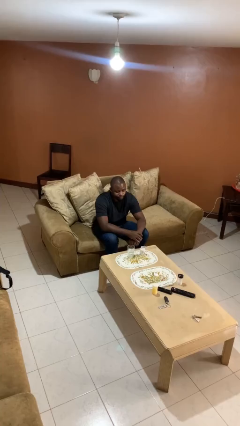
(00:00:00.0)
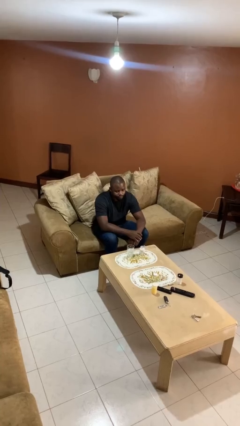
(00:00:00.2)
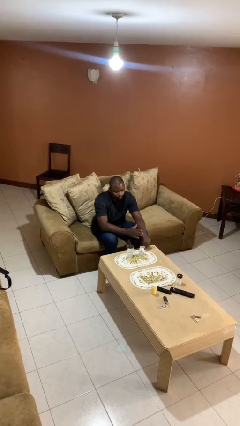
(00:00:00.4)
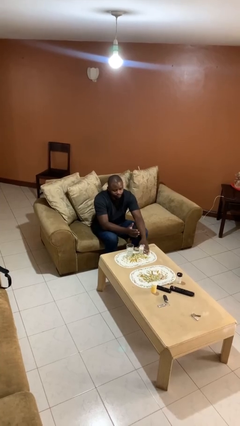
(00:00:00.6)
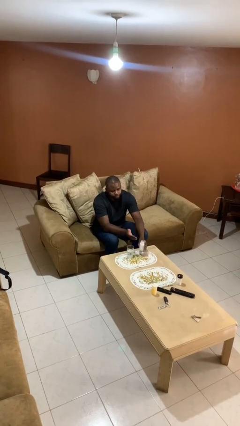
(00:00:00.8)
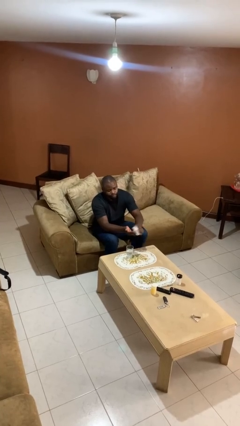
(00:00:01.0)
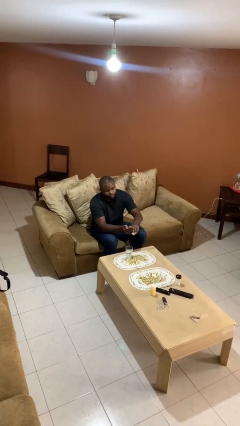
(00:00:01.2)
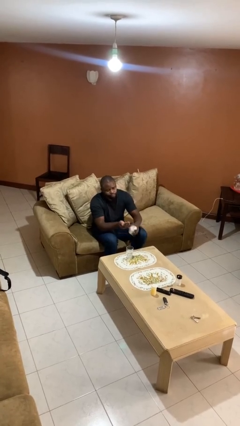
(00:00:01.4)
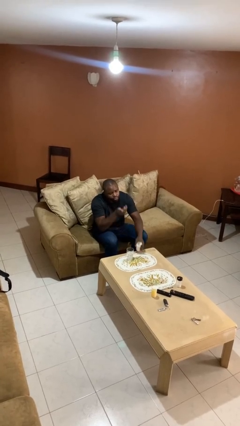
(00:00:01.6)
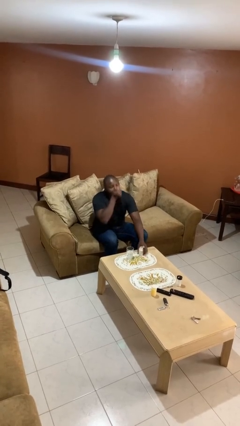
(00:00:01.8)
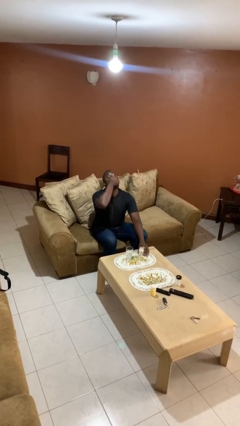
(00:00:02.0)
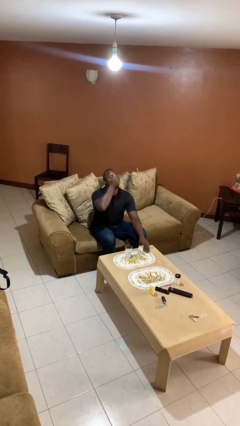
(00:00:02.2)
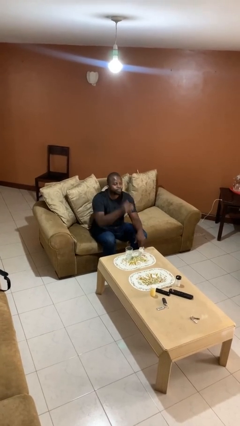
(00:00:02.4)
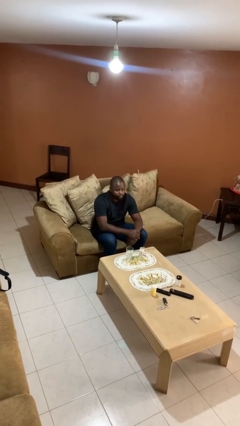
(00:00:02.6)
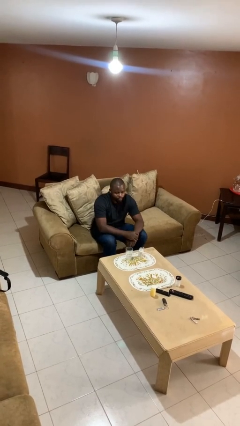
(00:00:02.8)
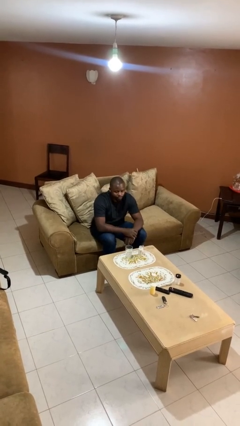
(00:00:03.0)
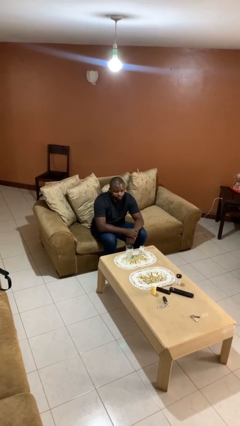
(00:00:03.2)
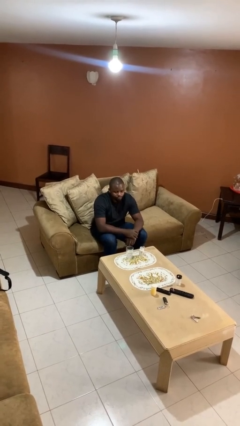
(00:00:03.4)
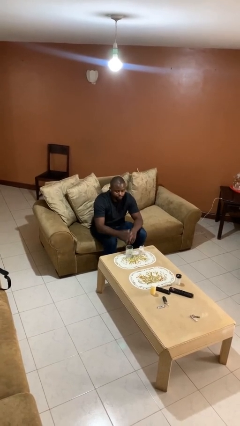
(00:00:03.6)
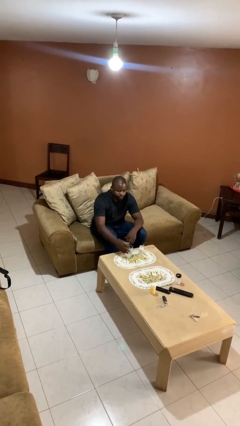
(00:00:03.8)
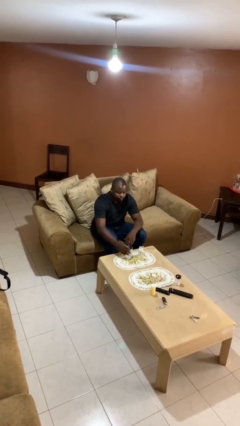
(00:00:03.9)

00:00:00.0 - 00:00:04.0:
person takes medicine pills

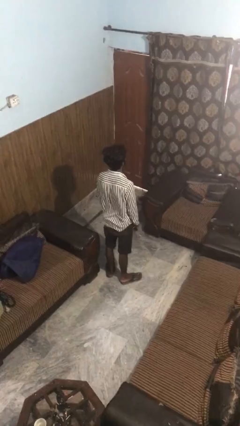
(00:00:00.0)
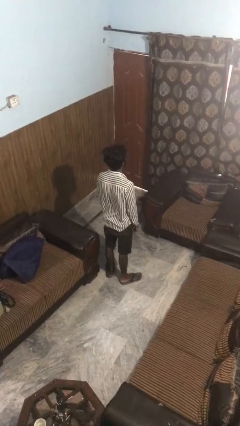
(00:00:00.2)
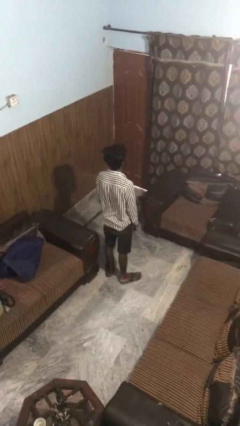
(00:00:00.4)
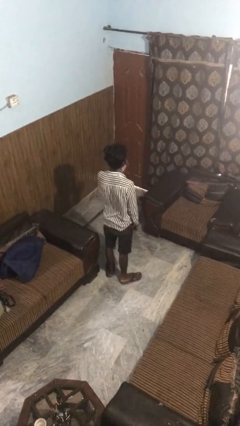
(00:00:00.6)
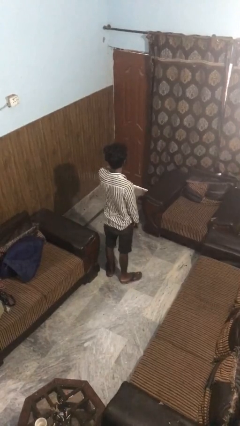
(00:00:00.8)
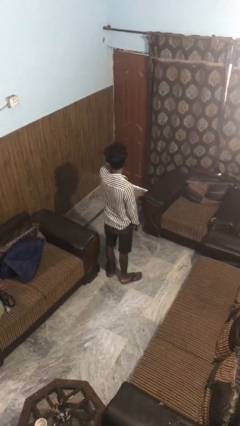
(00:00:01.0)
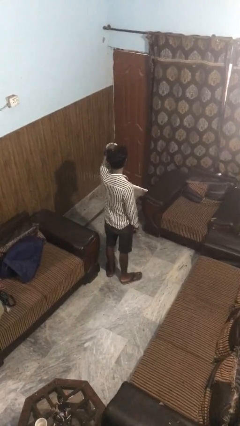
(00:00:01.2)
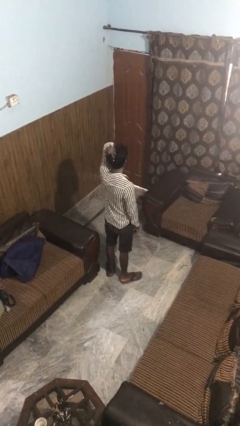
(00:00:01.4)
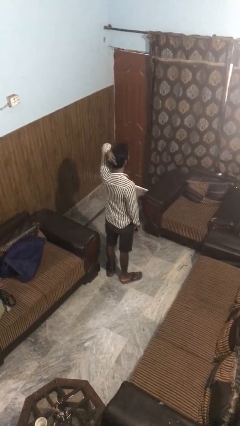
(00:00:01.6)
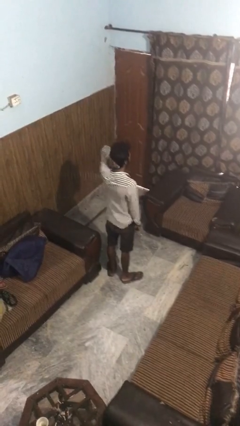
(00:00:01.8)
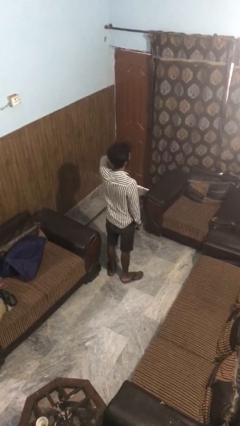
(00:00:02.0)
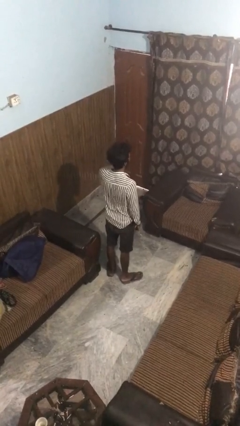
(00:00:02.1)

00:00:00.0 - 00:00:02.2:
person strokes hair

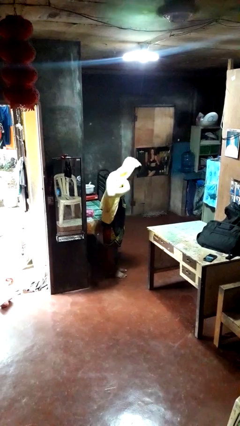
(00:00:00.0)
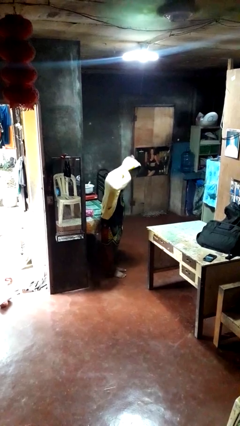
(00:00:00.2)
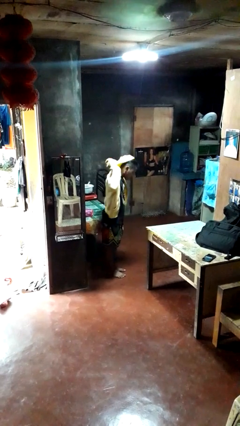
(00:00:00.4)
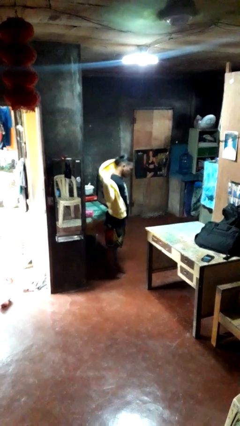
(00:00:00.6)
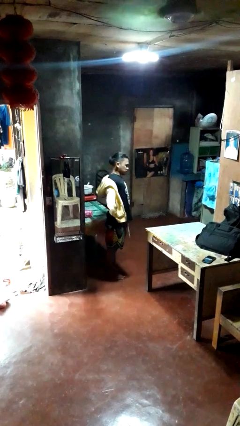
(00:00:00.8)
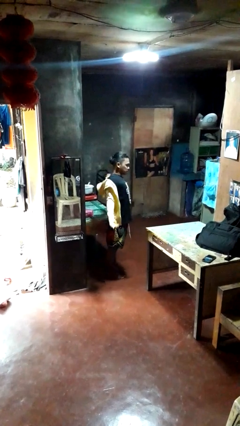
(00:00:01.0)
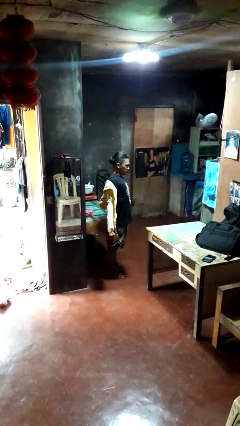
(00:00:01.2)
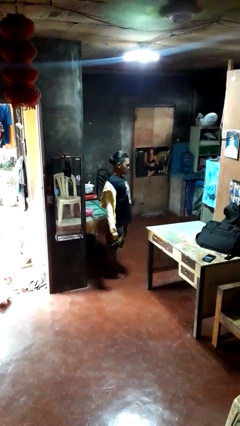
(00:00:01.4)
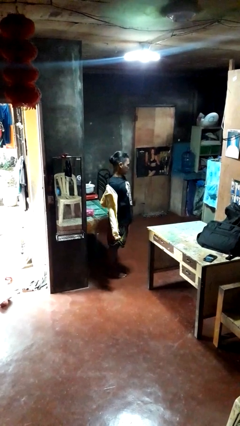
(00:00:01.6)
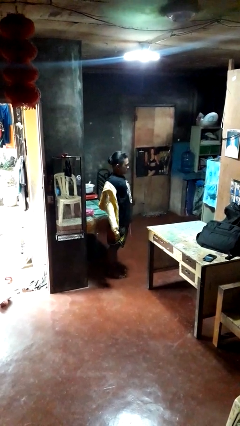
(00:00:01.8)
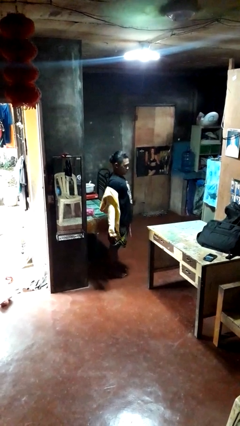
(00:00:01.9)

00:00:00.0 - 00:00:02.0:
person takes off hoodie

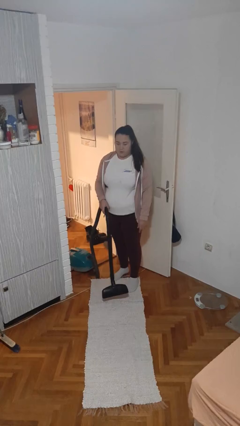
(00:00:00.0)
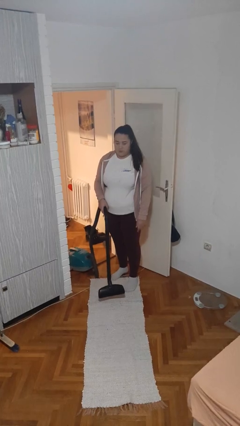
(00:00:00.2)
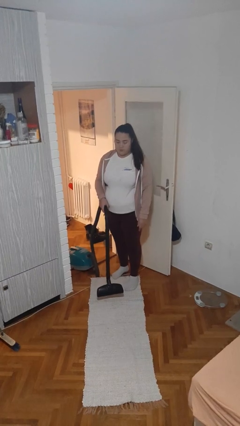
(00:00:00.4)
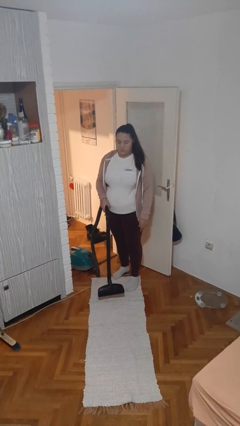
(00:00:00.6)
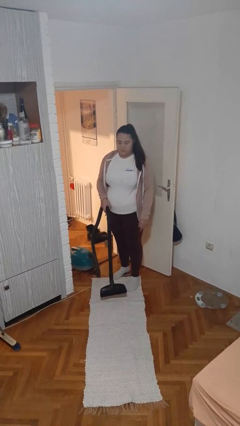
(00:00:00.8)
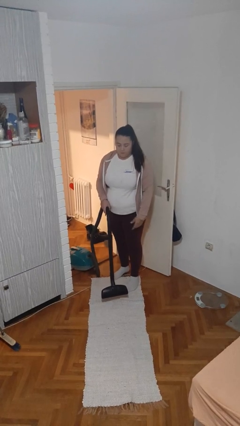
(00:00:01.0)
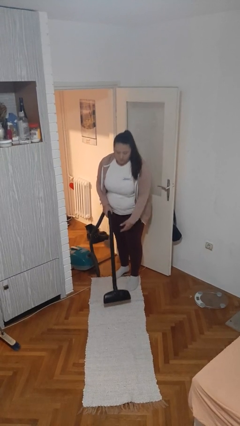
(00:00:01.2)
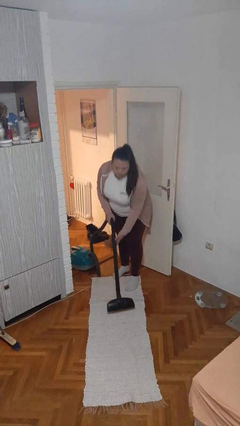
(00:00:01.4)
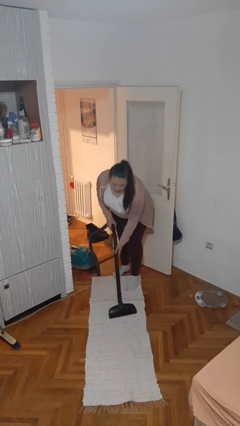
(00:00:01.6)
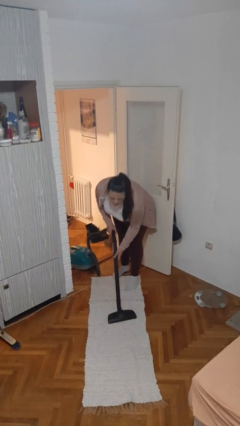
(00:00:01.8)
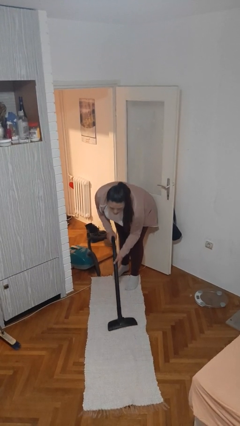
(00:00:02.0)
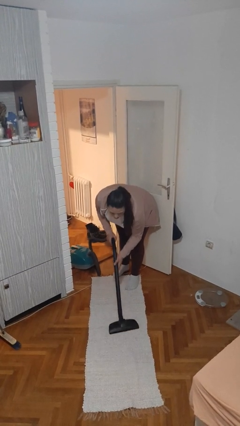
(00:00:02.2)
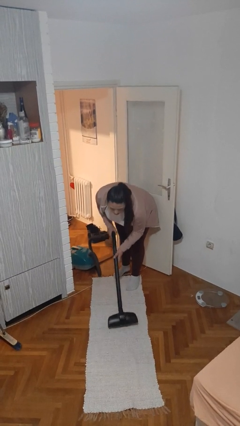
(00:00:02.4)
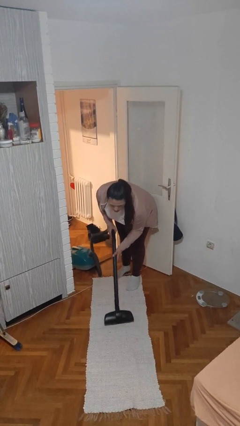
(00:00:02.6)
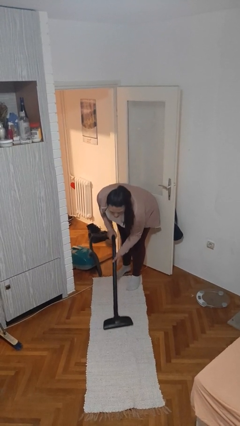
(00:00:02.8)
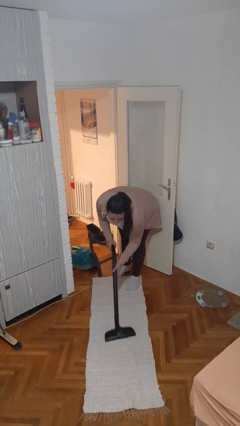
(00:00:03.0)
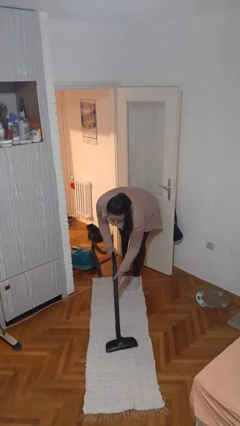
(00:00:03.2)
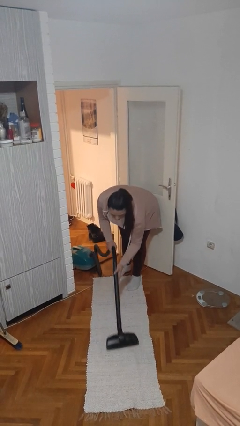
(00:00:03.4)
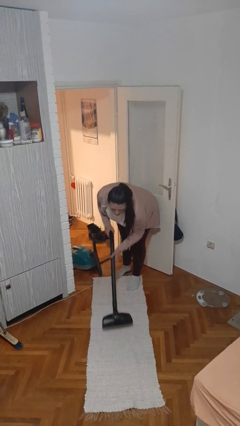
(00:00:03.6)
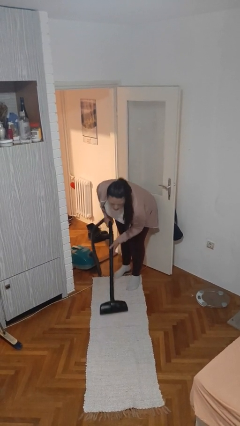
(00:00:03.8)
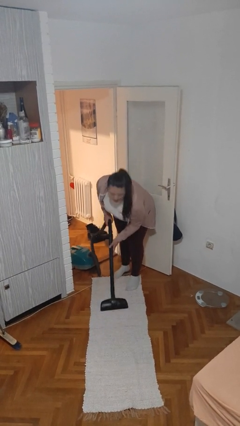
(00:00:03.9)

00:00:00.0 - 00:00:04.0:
person vacuums carpet

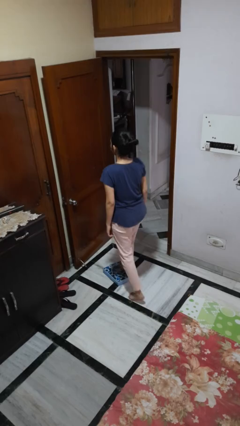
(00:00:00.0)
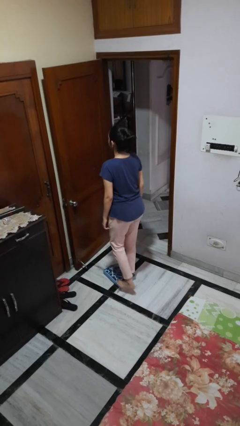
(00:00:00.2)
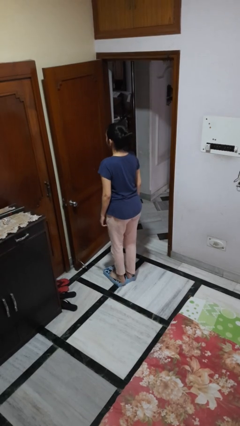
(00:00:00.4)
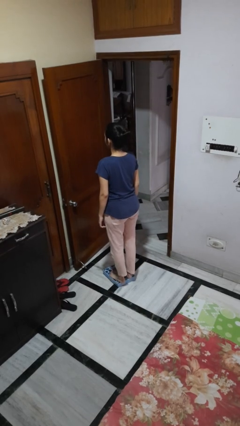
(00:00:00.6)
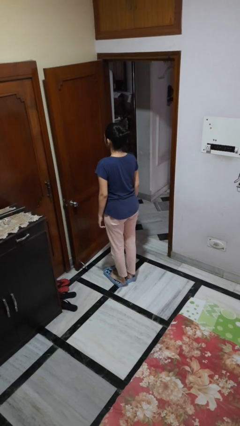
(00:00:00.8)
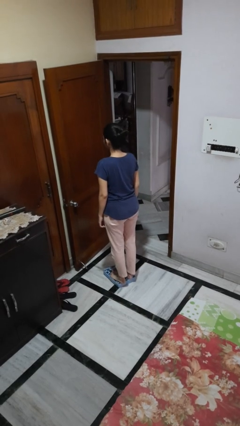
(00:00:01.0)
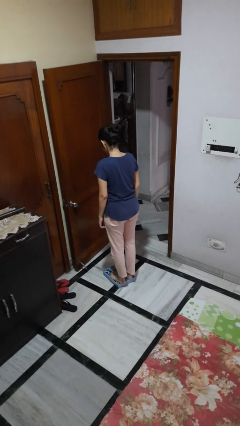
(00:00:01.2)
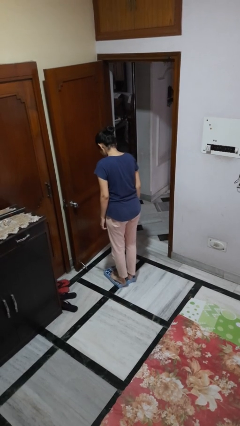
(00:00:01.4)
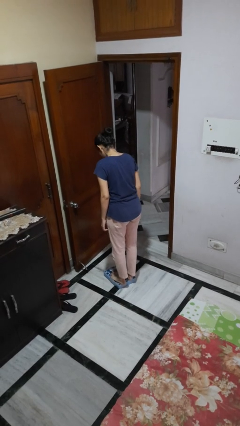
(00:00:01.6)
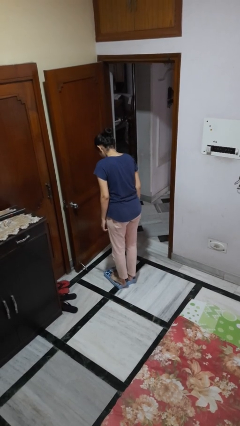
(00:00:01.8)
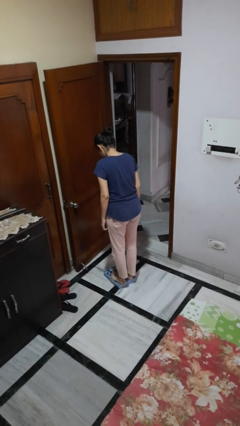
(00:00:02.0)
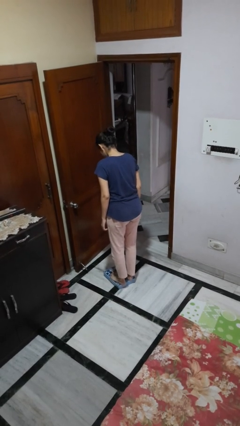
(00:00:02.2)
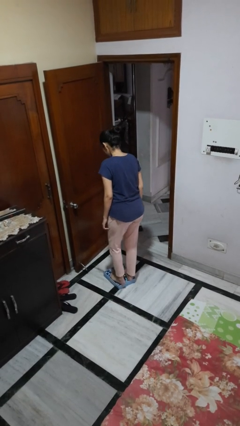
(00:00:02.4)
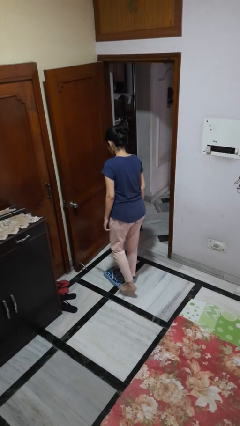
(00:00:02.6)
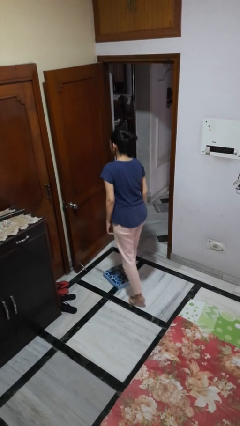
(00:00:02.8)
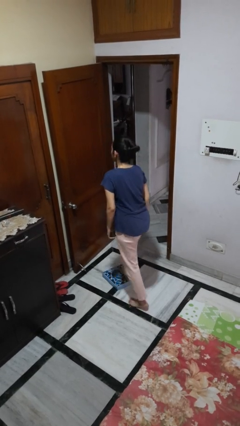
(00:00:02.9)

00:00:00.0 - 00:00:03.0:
person uses bodyweight scale

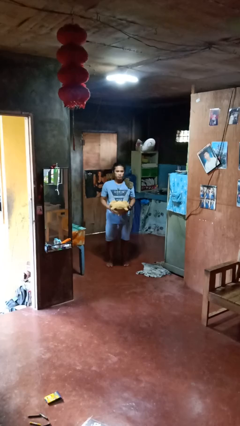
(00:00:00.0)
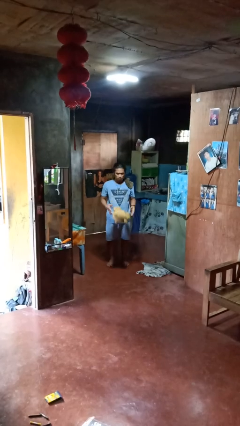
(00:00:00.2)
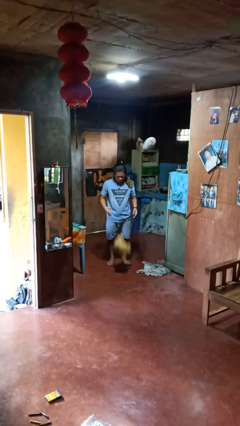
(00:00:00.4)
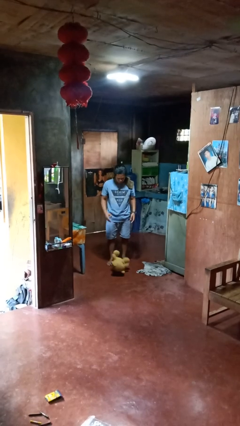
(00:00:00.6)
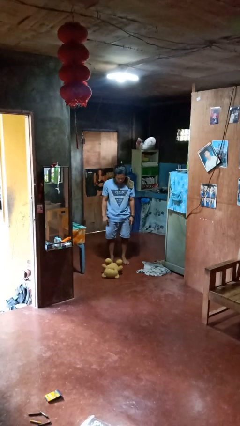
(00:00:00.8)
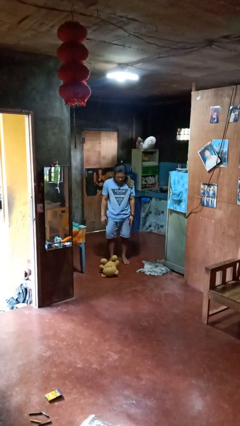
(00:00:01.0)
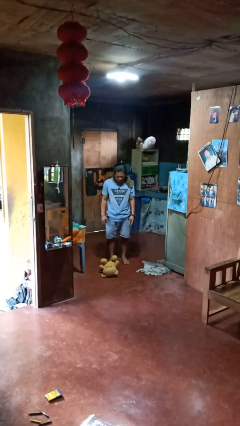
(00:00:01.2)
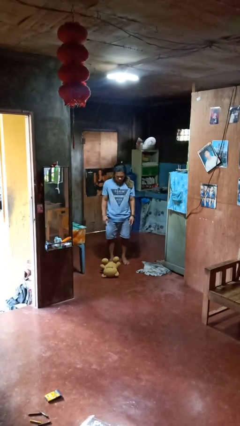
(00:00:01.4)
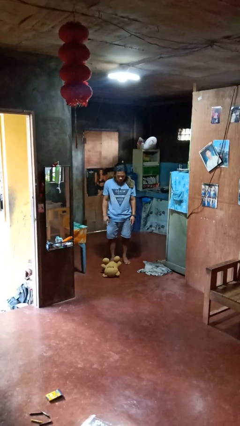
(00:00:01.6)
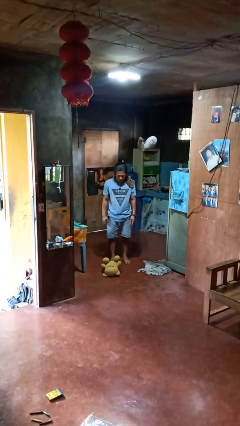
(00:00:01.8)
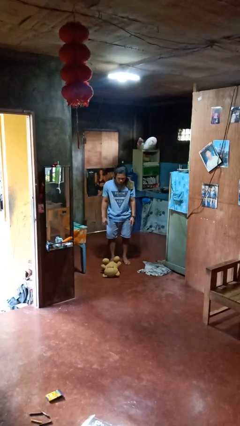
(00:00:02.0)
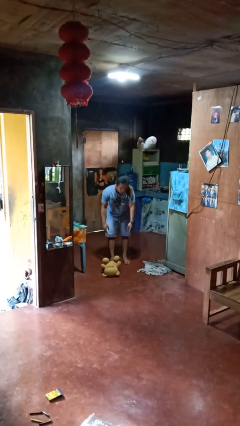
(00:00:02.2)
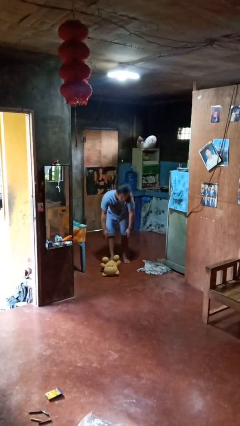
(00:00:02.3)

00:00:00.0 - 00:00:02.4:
person drops object
